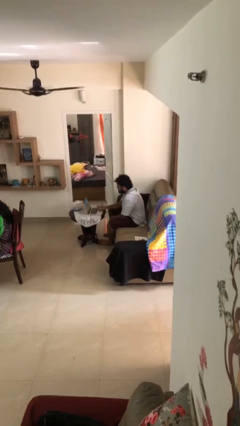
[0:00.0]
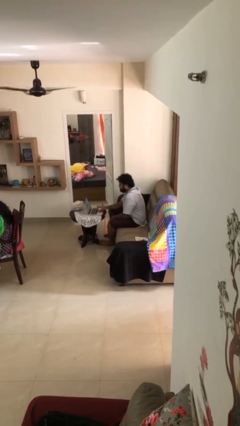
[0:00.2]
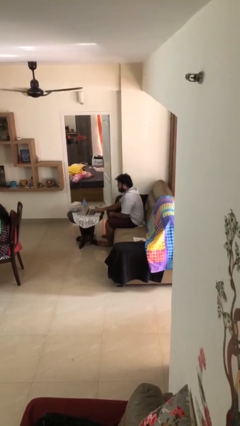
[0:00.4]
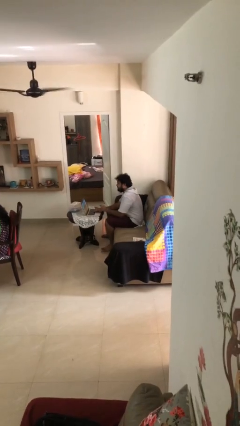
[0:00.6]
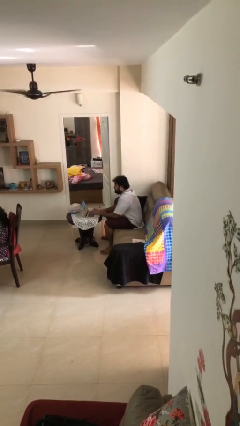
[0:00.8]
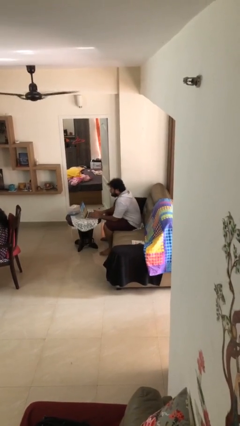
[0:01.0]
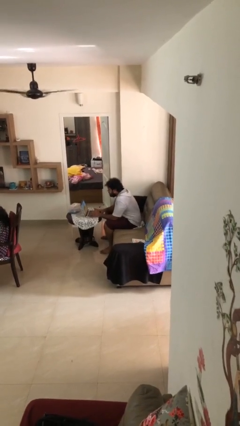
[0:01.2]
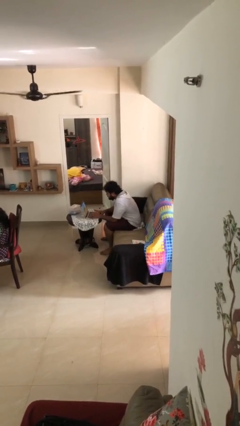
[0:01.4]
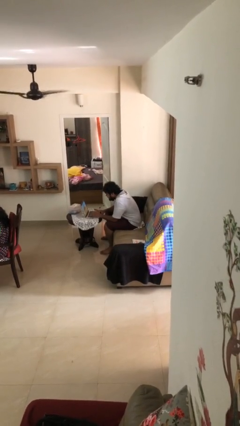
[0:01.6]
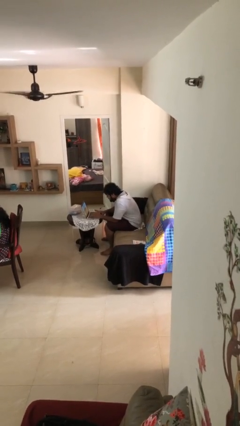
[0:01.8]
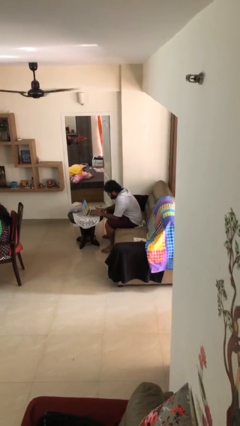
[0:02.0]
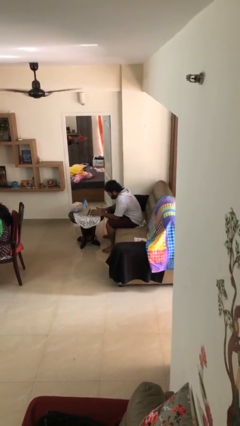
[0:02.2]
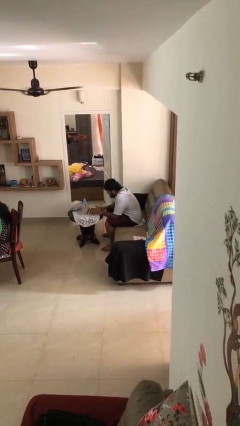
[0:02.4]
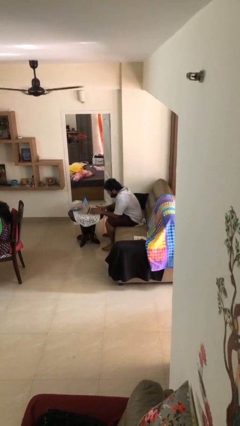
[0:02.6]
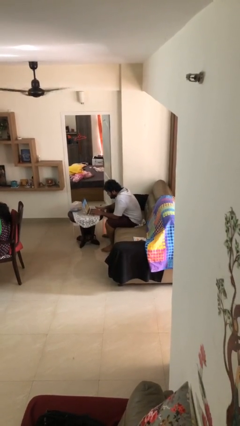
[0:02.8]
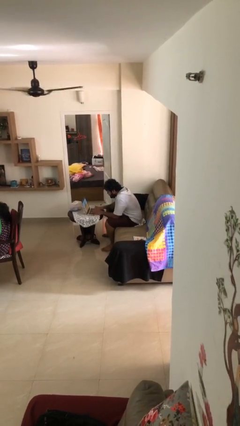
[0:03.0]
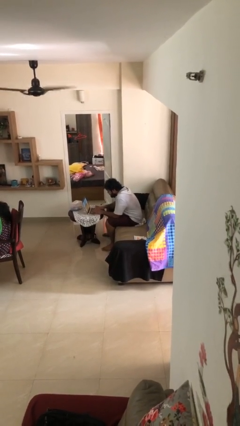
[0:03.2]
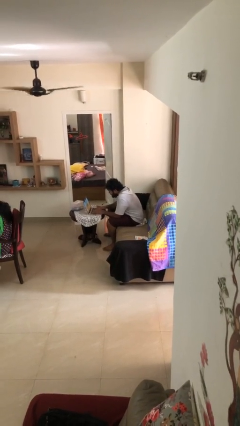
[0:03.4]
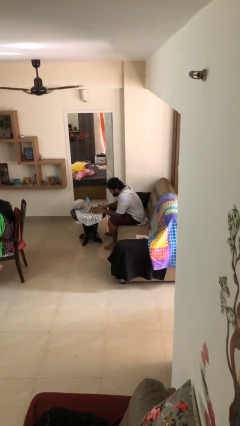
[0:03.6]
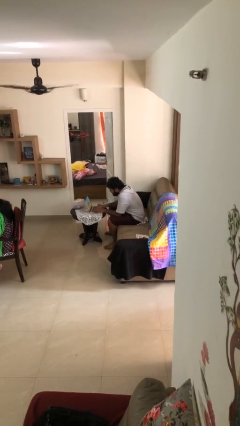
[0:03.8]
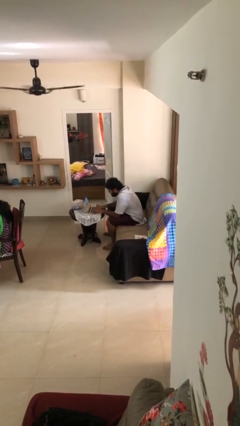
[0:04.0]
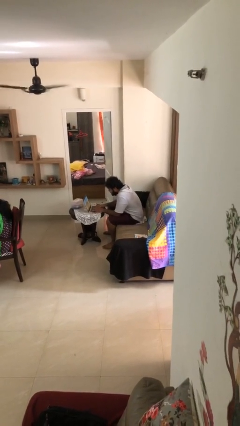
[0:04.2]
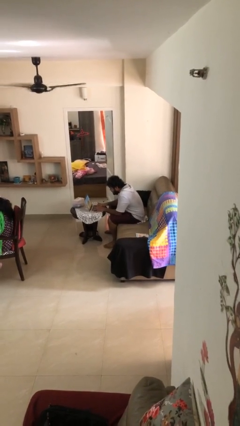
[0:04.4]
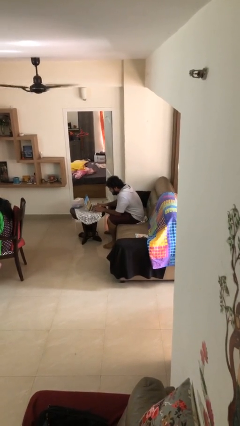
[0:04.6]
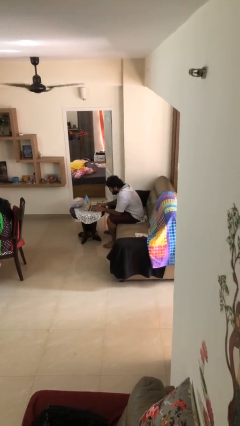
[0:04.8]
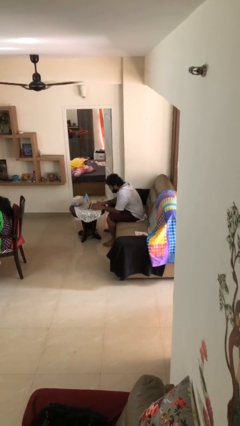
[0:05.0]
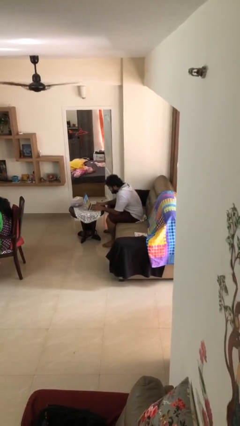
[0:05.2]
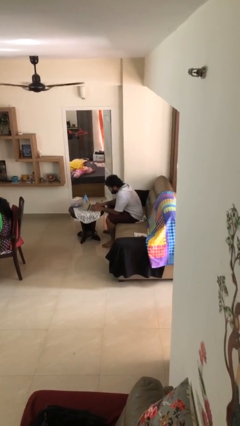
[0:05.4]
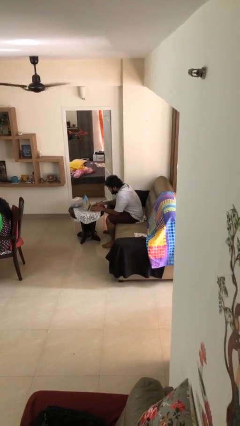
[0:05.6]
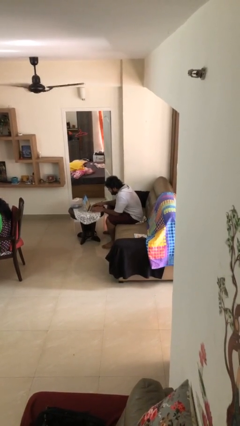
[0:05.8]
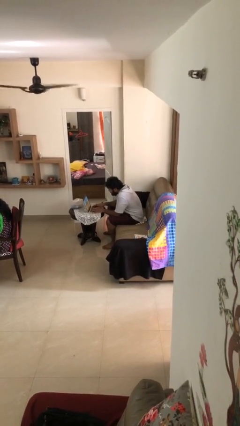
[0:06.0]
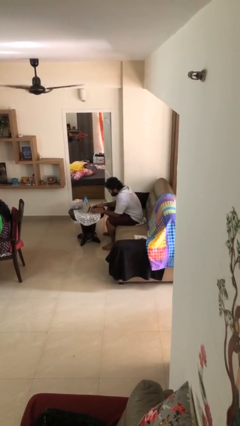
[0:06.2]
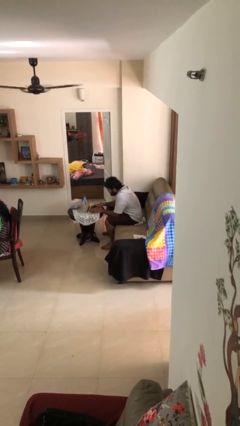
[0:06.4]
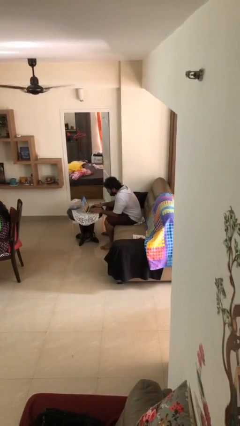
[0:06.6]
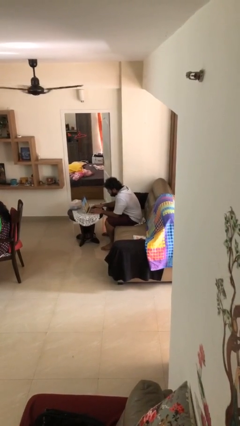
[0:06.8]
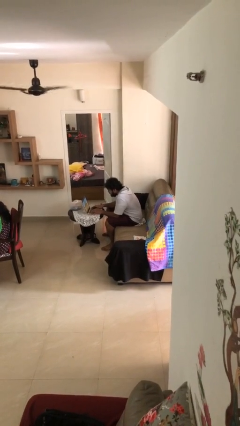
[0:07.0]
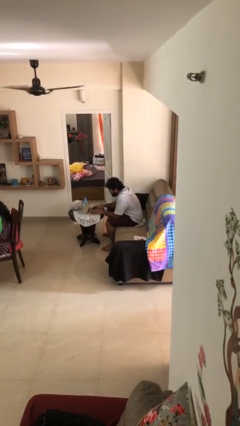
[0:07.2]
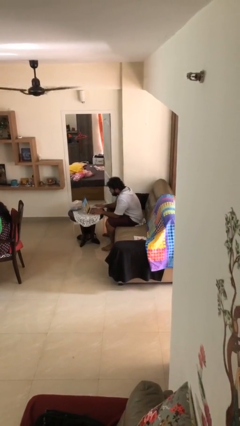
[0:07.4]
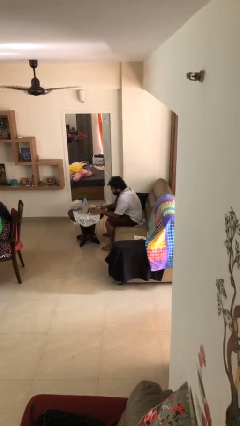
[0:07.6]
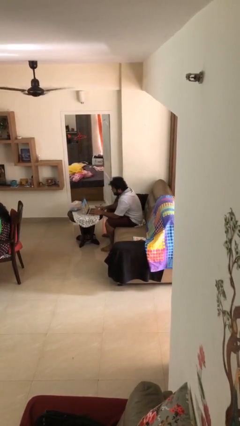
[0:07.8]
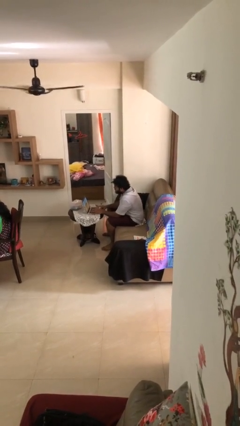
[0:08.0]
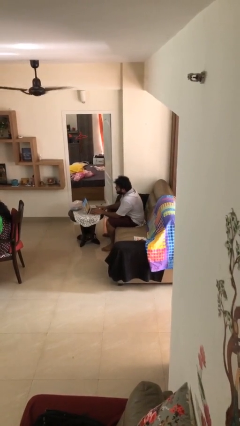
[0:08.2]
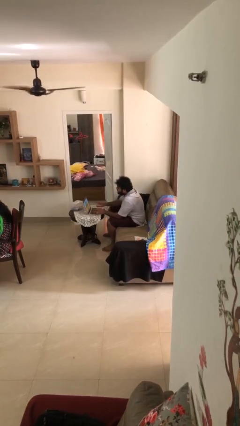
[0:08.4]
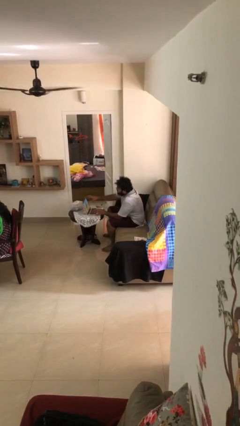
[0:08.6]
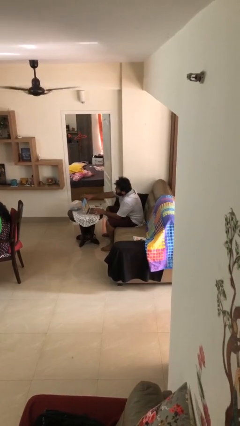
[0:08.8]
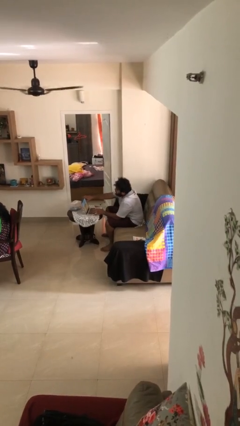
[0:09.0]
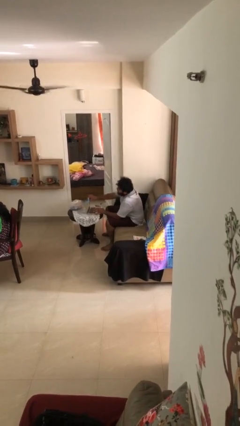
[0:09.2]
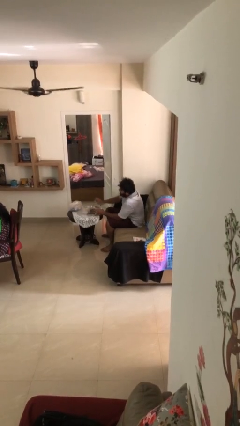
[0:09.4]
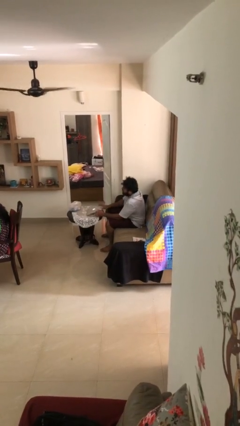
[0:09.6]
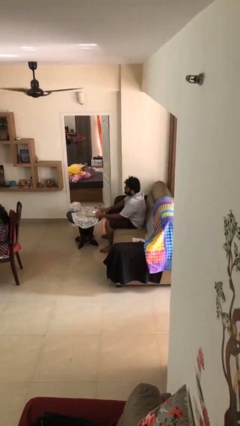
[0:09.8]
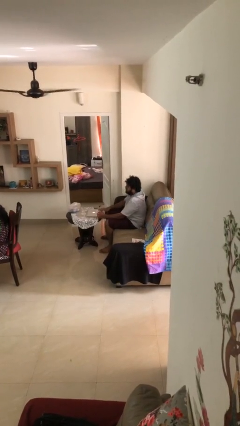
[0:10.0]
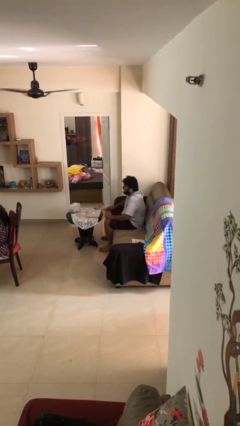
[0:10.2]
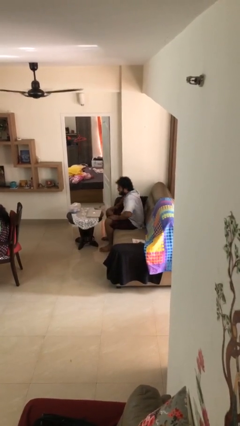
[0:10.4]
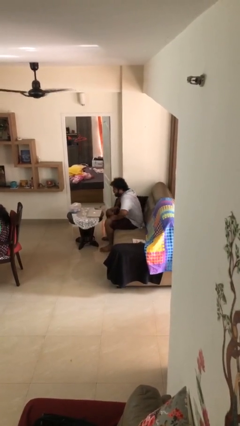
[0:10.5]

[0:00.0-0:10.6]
person interacts with laptop

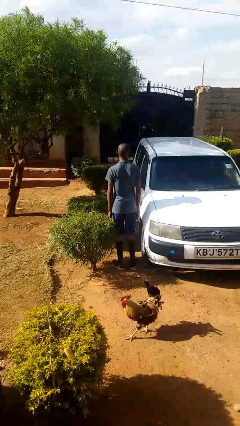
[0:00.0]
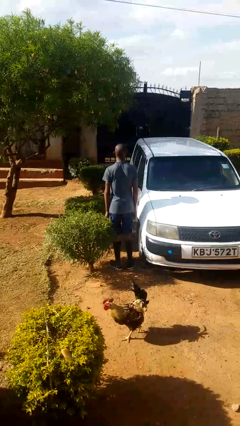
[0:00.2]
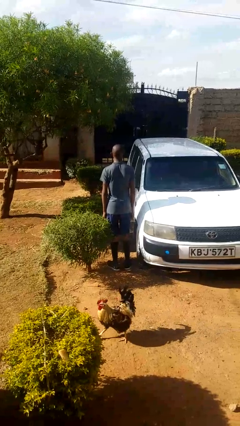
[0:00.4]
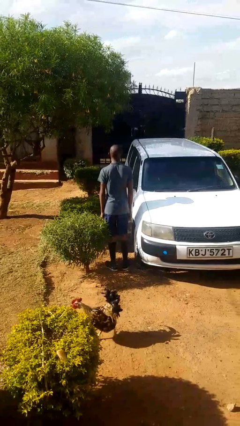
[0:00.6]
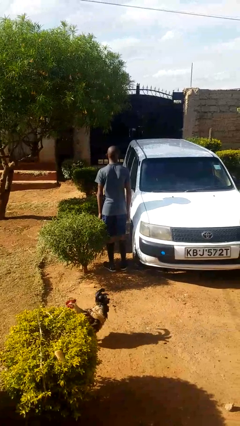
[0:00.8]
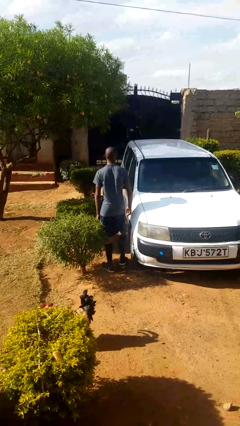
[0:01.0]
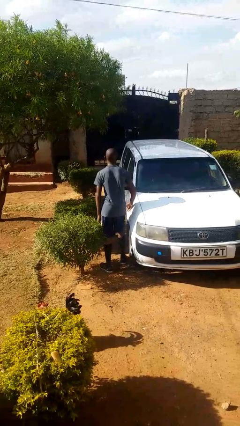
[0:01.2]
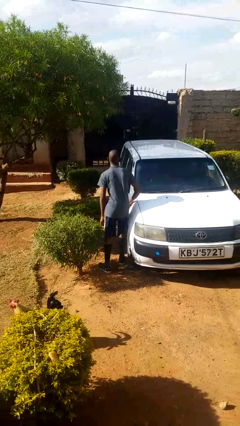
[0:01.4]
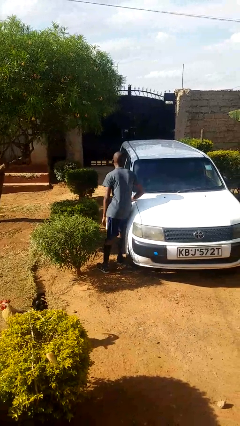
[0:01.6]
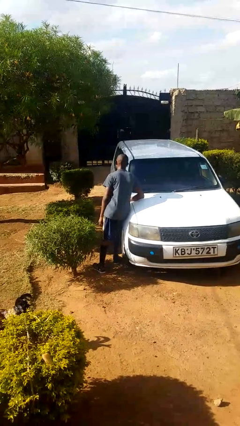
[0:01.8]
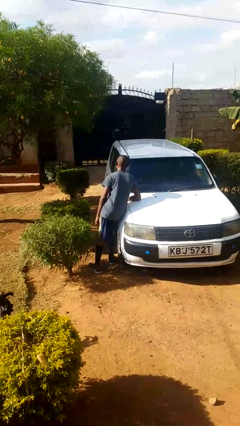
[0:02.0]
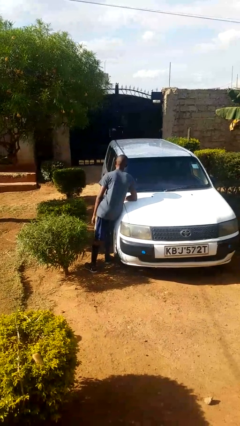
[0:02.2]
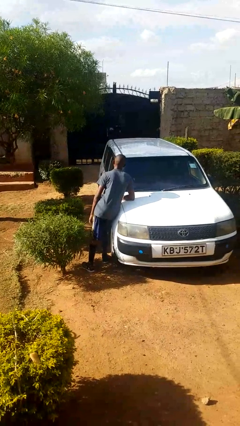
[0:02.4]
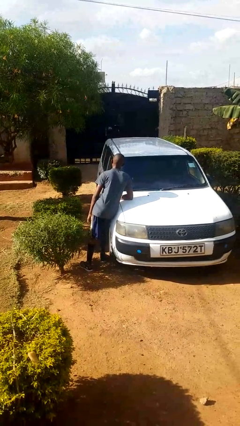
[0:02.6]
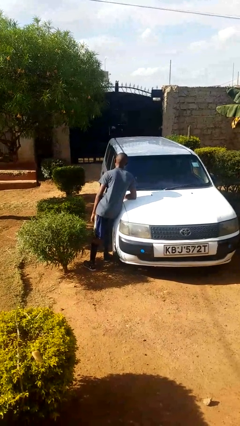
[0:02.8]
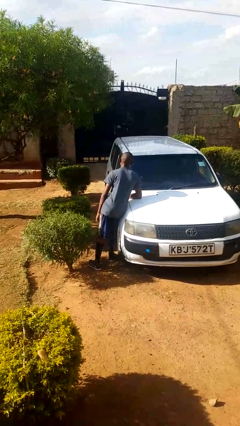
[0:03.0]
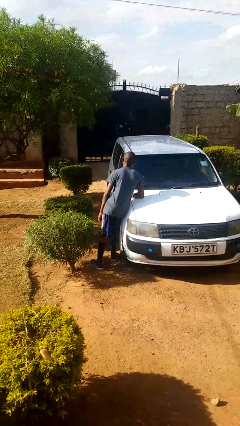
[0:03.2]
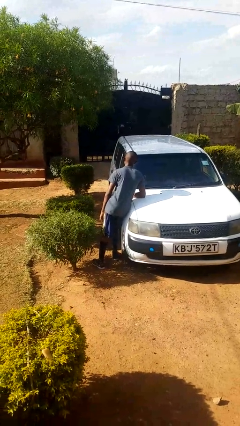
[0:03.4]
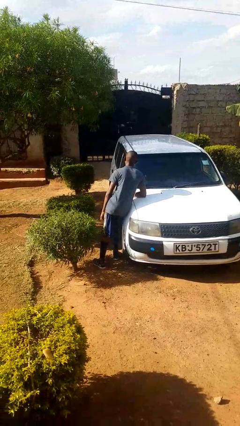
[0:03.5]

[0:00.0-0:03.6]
person leans against car

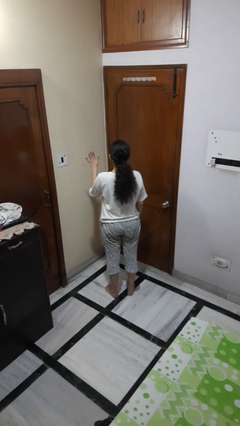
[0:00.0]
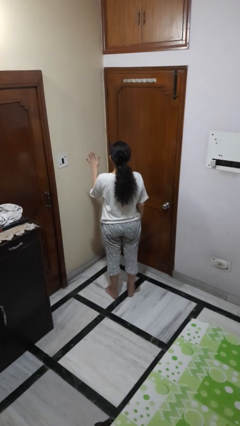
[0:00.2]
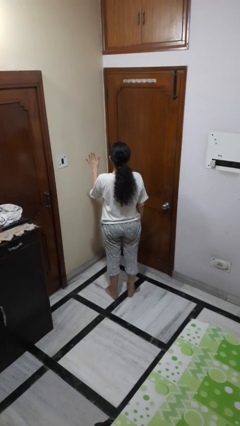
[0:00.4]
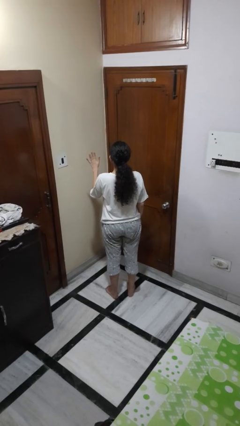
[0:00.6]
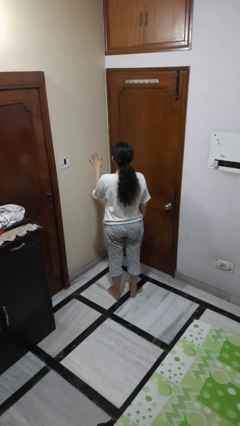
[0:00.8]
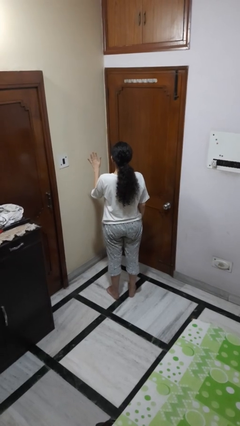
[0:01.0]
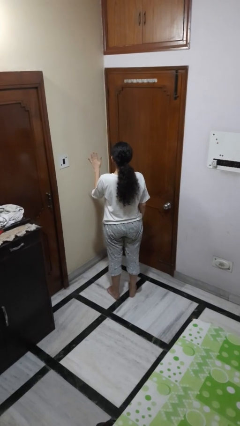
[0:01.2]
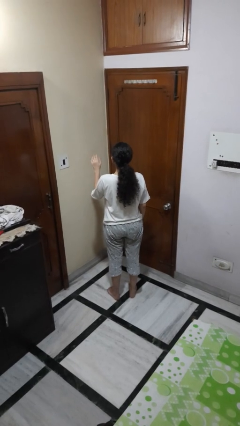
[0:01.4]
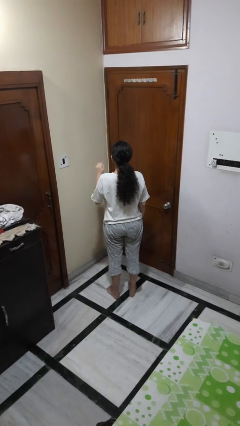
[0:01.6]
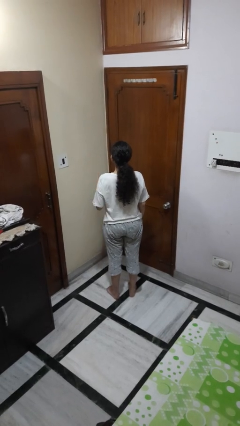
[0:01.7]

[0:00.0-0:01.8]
person gestures number five

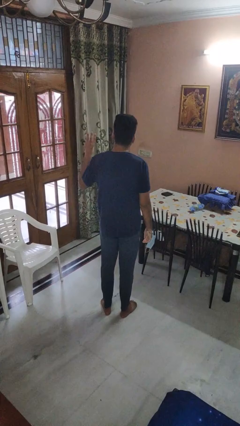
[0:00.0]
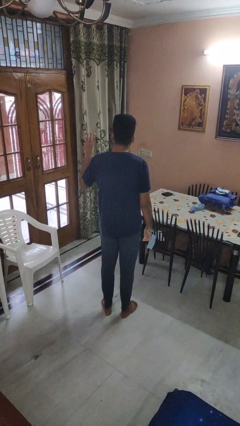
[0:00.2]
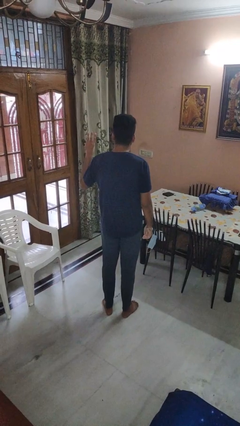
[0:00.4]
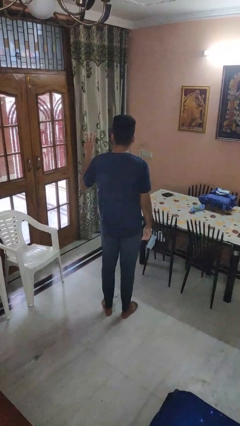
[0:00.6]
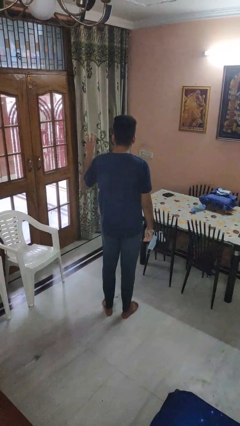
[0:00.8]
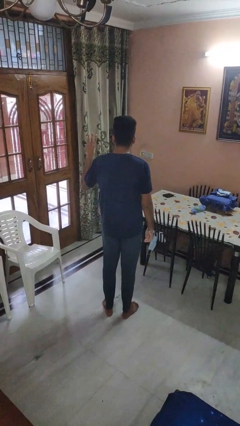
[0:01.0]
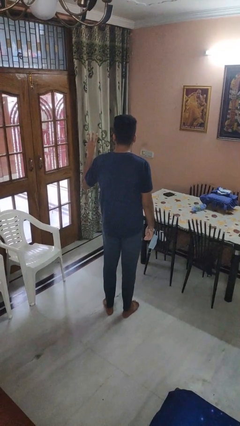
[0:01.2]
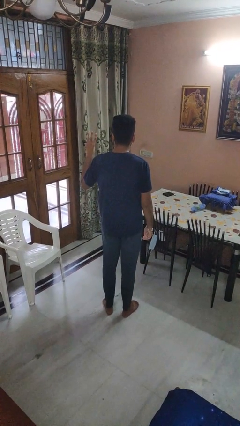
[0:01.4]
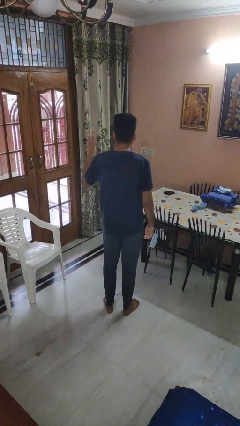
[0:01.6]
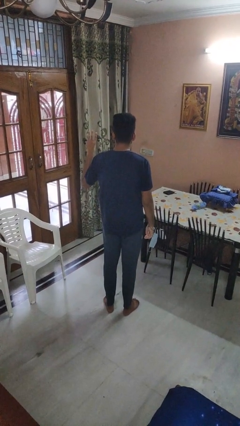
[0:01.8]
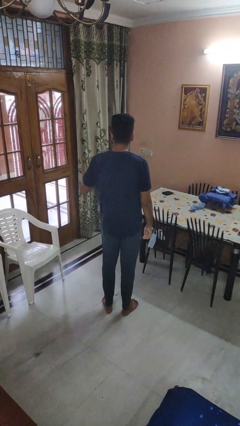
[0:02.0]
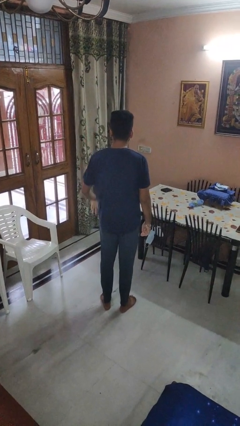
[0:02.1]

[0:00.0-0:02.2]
person gestures number three
